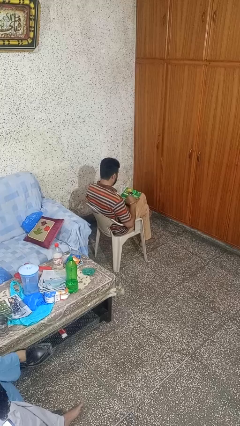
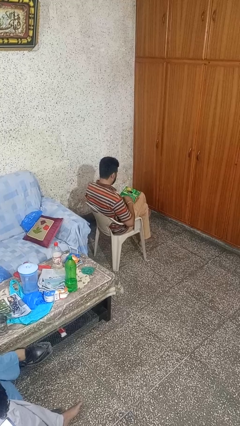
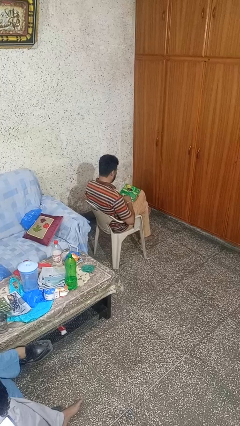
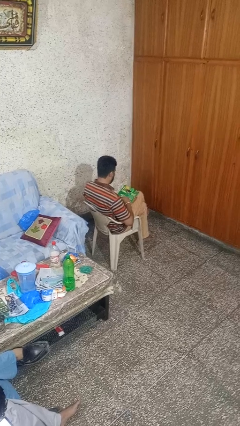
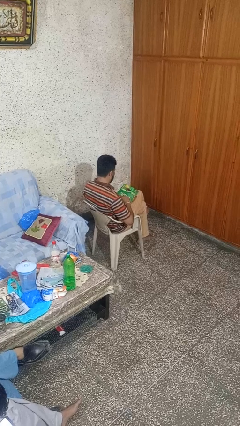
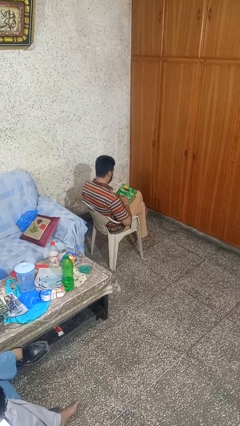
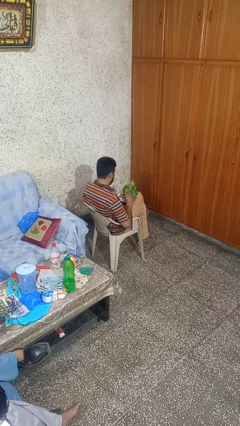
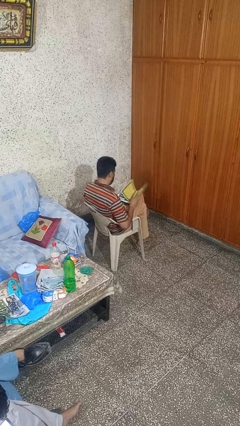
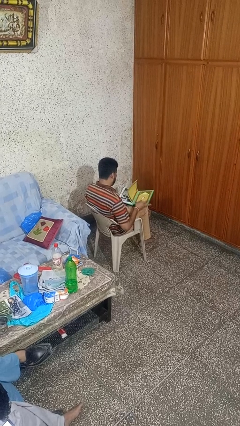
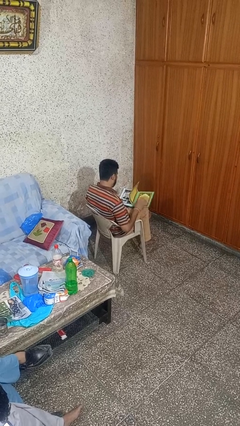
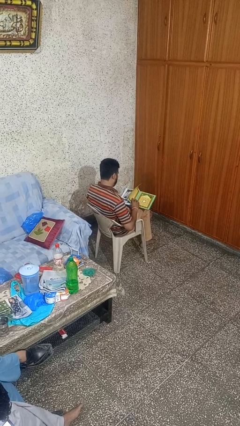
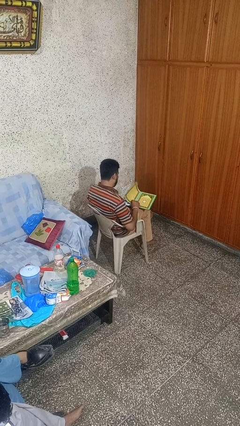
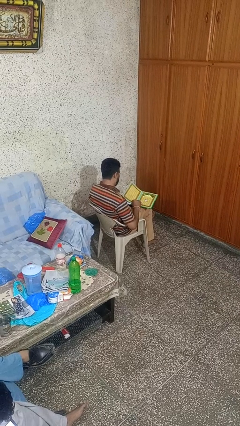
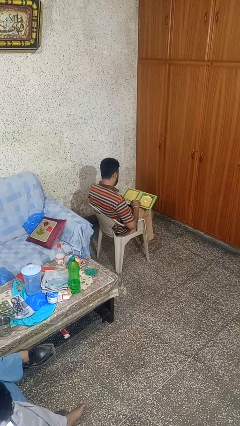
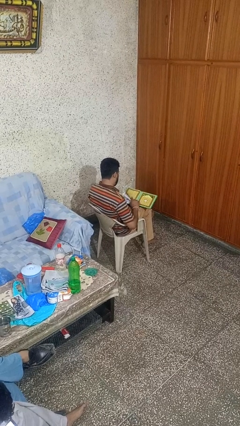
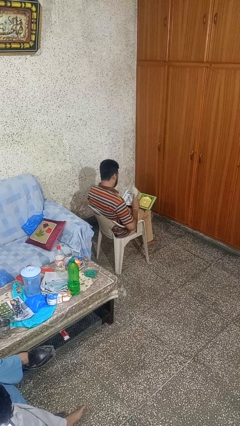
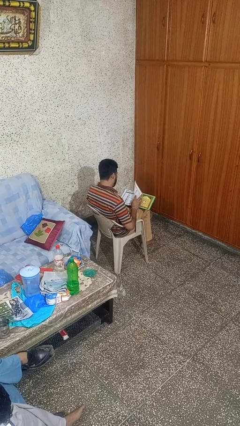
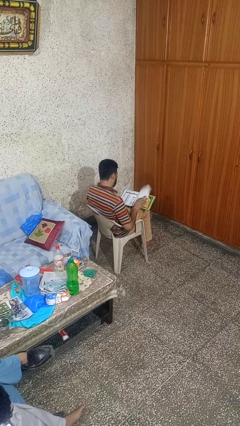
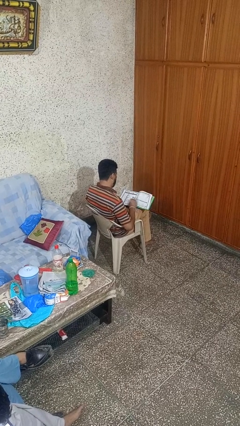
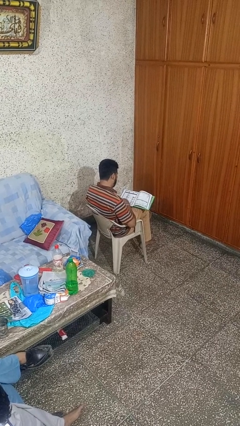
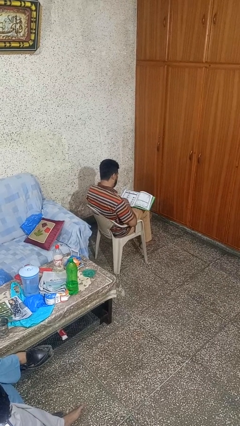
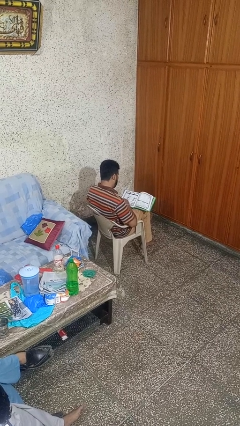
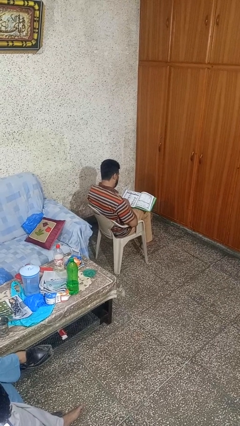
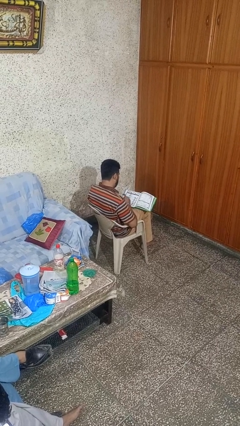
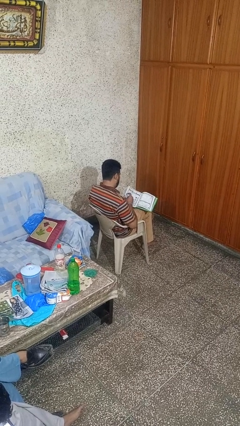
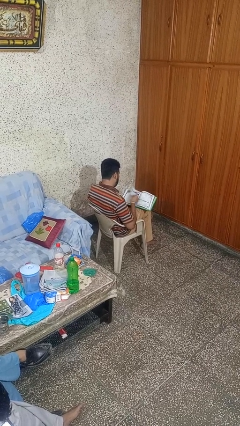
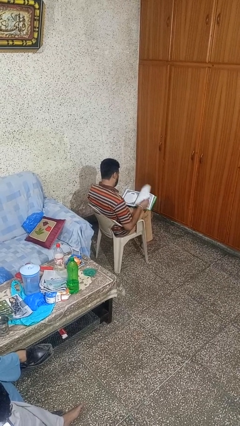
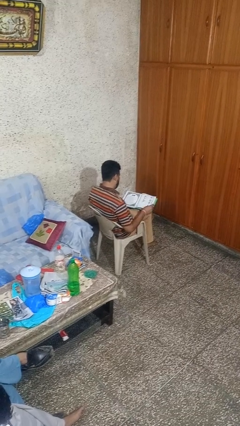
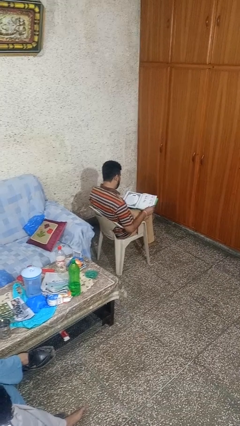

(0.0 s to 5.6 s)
person reads book

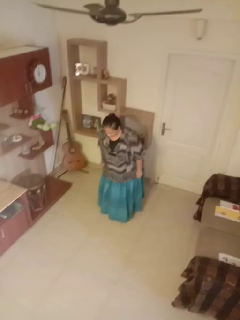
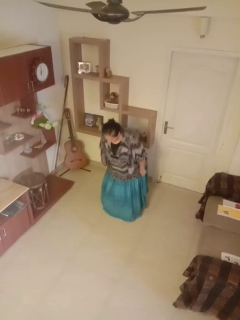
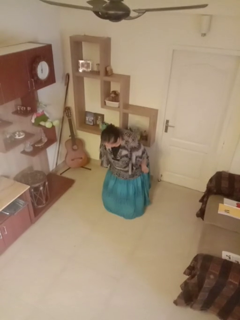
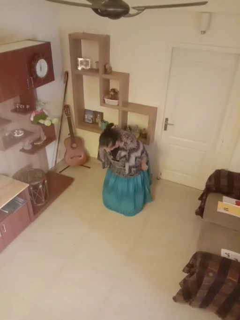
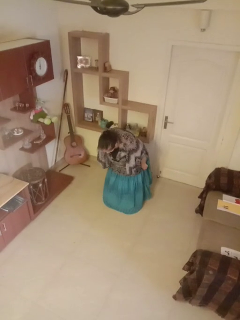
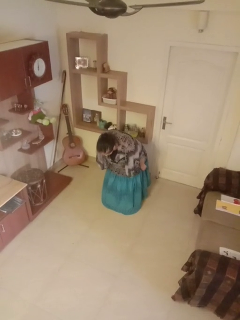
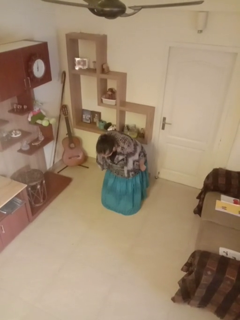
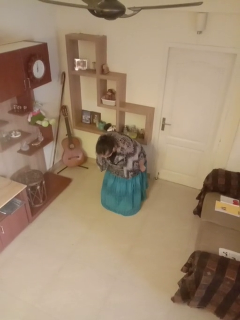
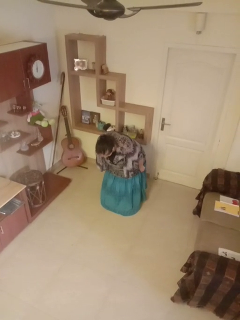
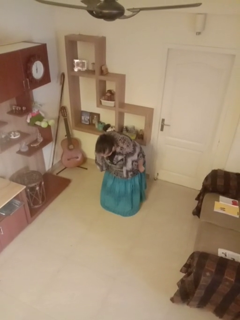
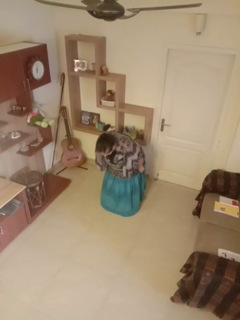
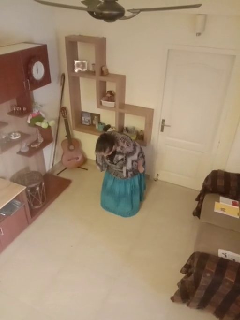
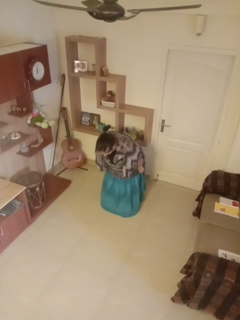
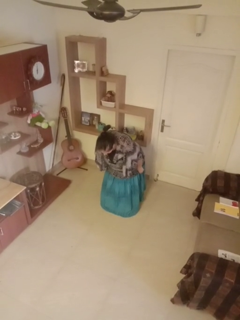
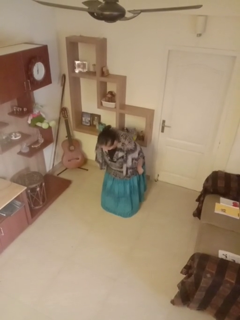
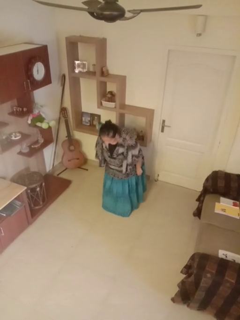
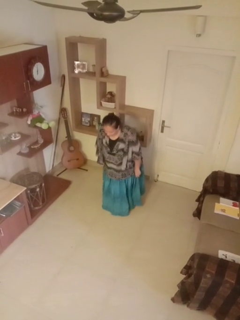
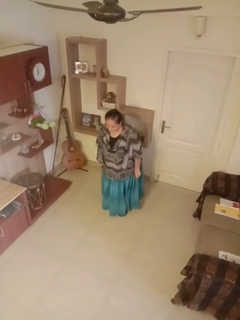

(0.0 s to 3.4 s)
person bows

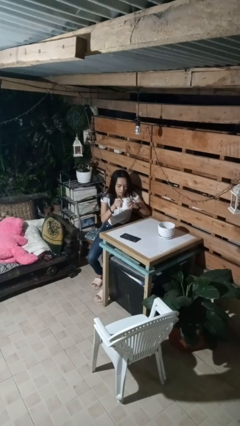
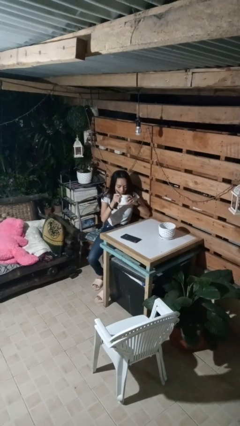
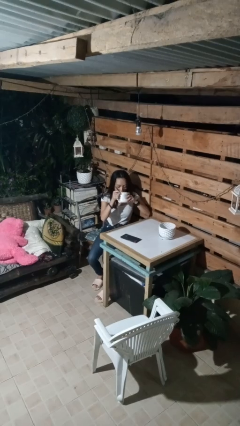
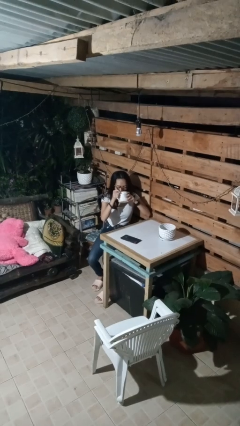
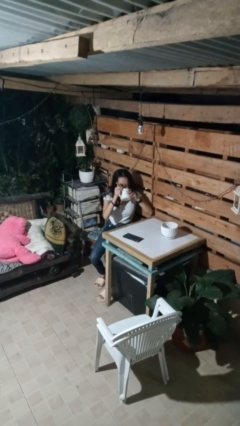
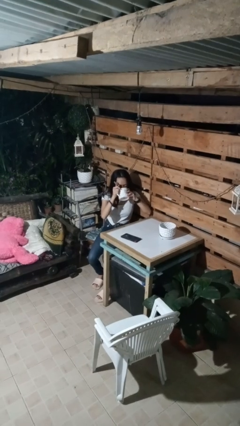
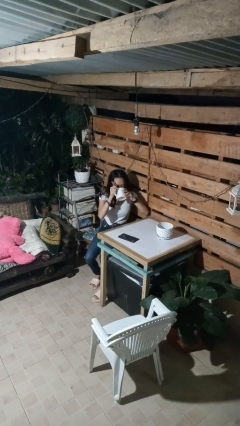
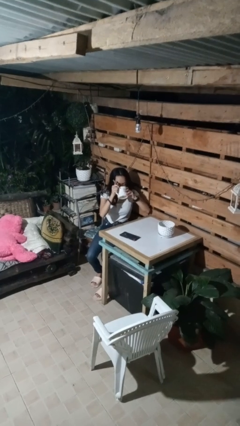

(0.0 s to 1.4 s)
person drinks from mug

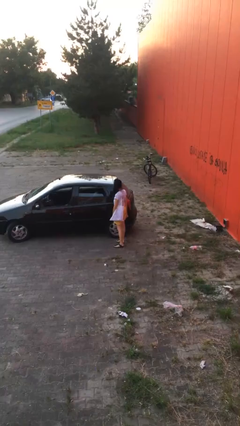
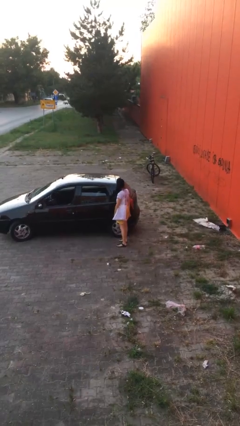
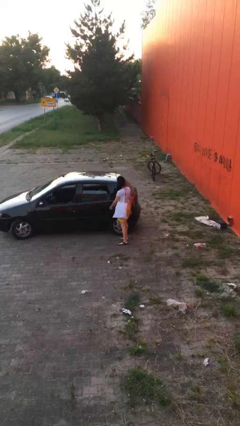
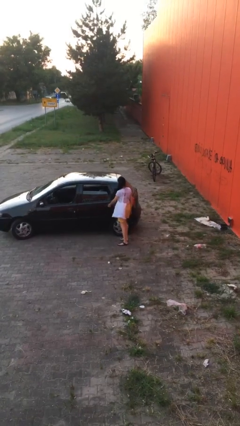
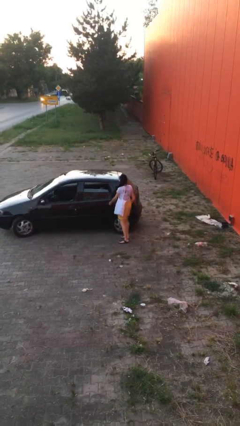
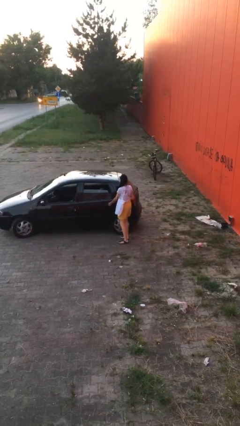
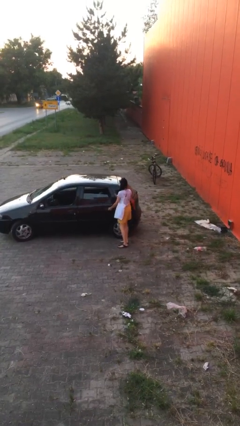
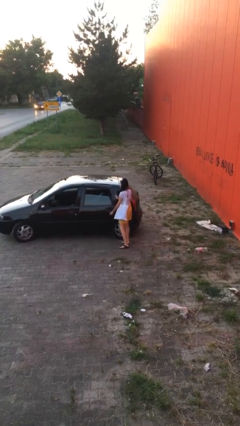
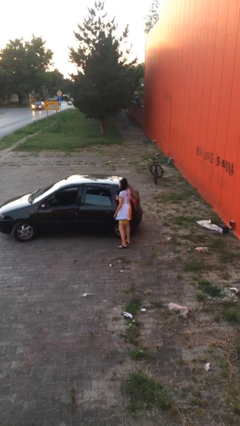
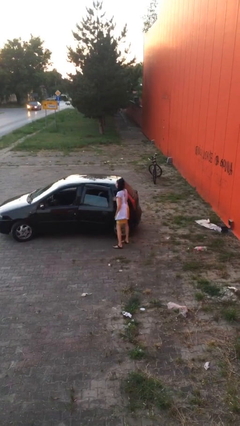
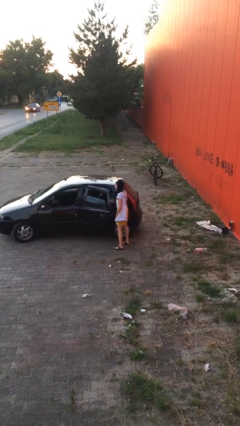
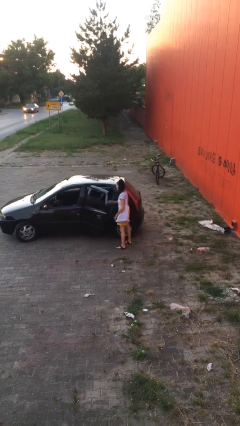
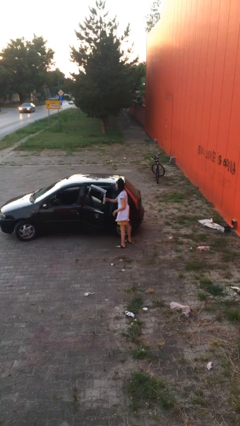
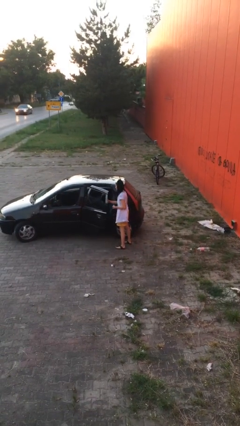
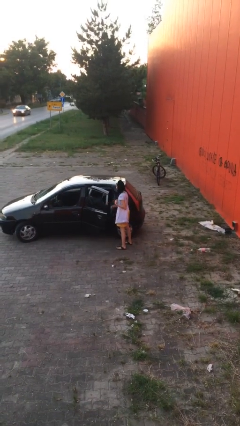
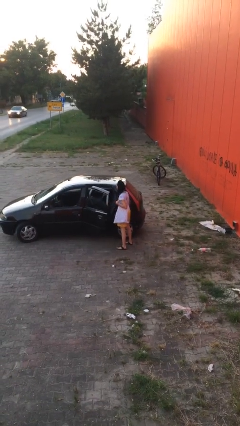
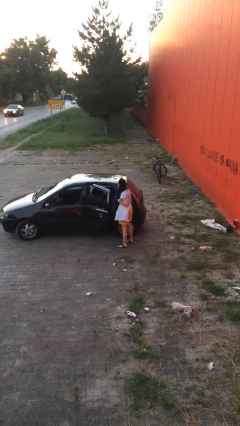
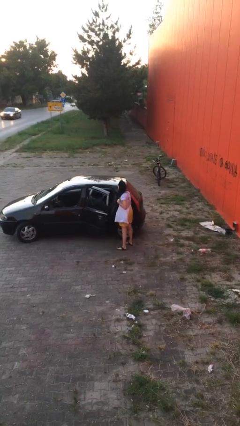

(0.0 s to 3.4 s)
person opens car door

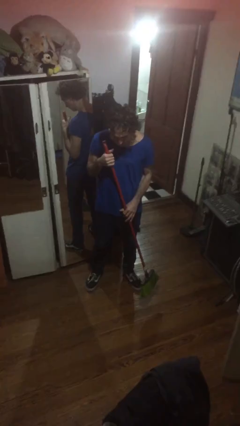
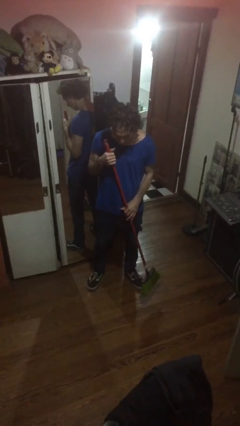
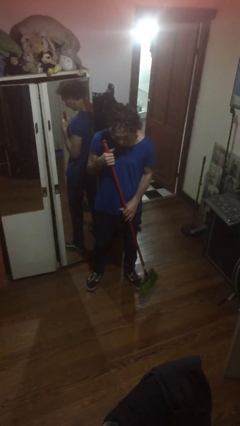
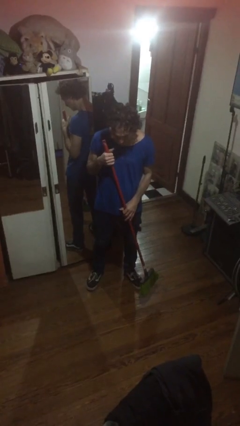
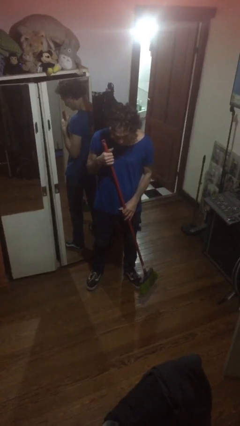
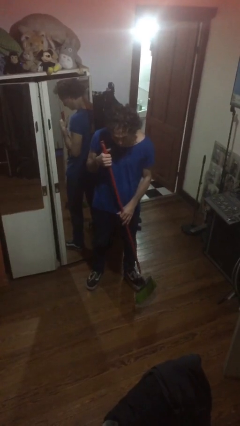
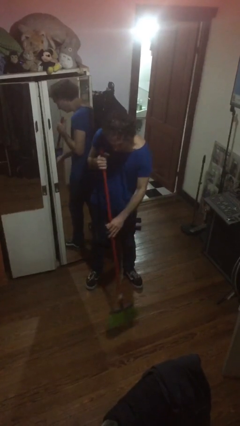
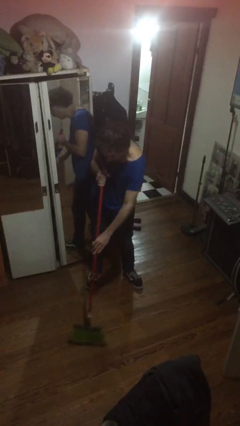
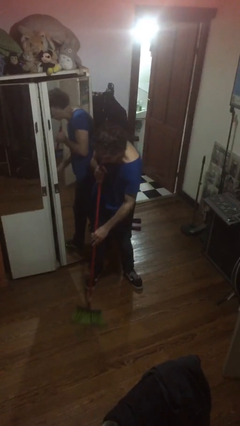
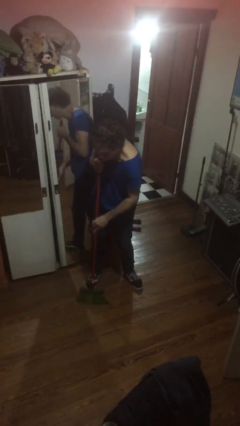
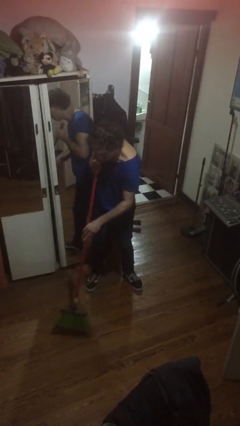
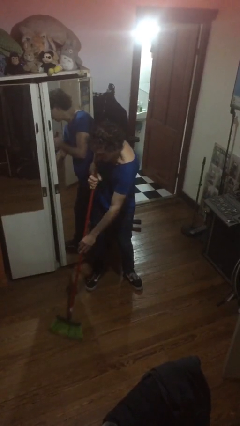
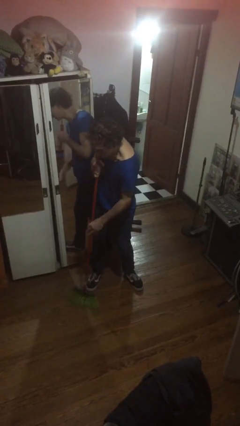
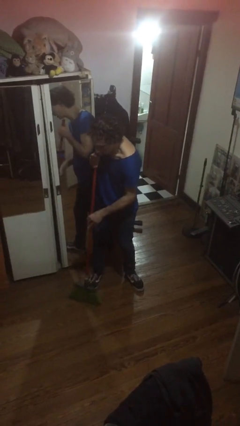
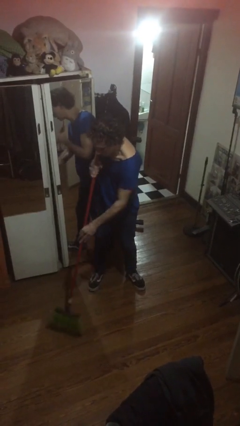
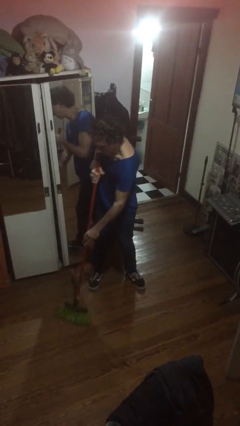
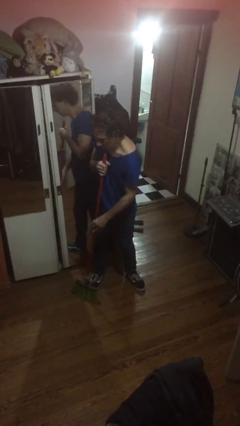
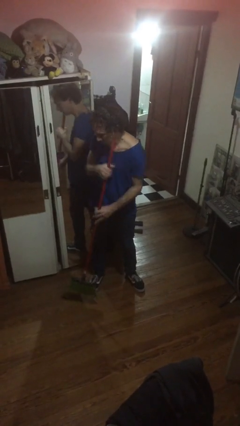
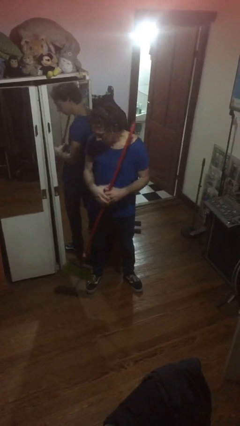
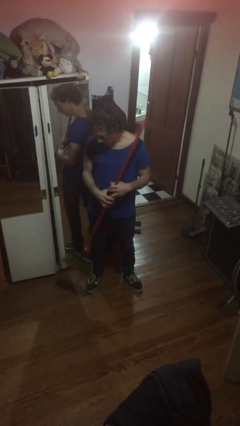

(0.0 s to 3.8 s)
person sweeps floor

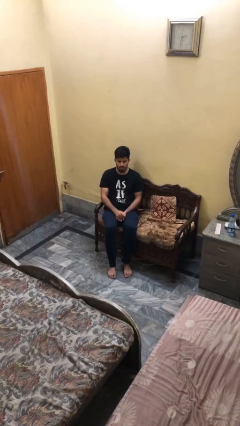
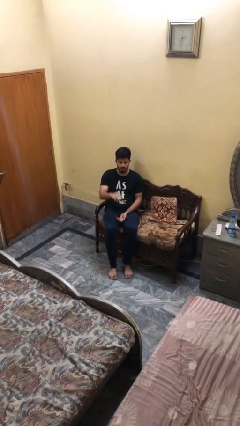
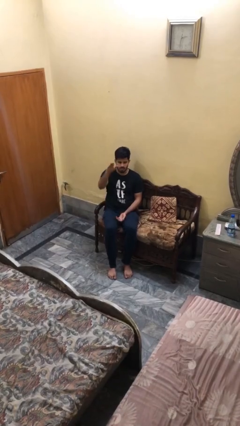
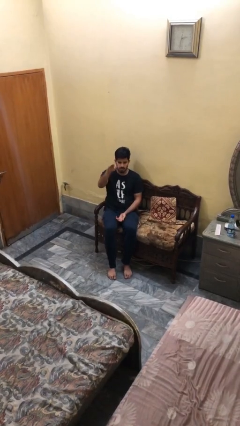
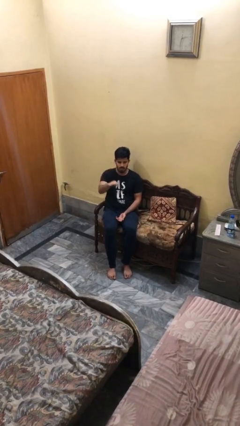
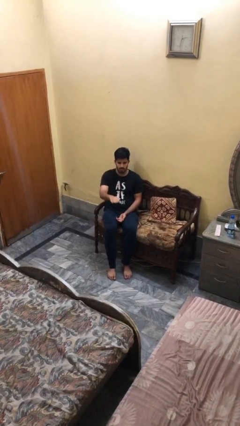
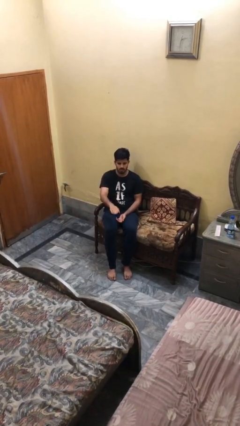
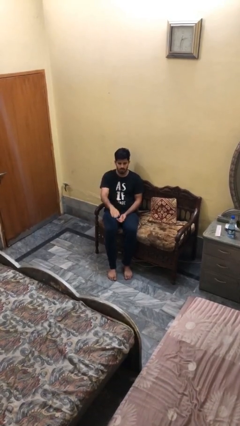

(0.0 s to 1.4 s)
person gestures swipe down
